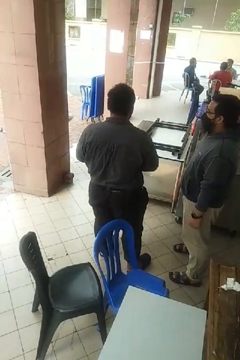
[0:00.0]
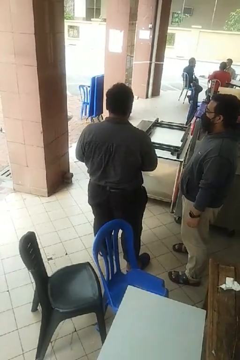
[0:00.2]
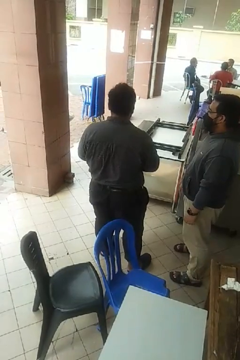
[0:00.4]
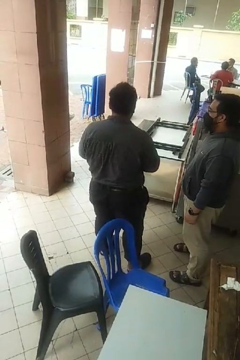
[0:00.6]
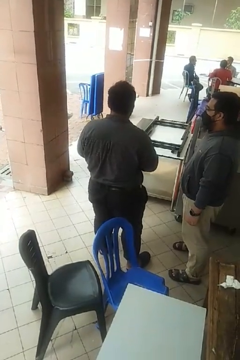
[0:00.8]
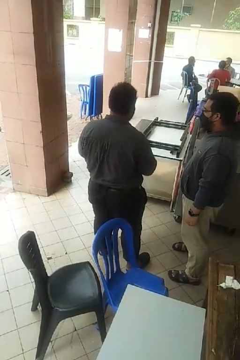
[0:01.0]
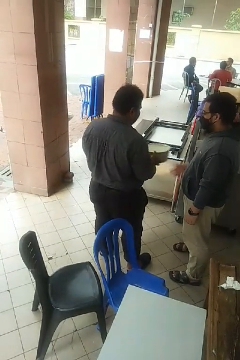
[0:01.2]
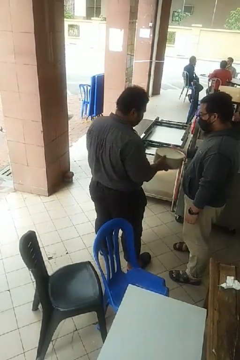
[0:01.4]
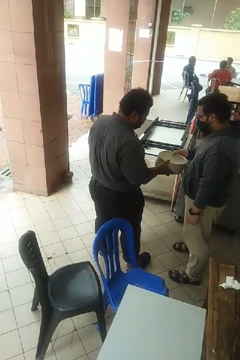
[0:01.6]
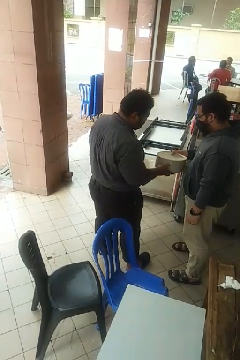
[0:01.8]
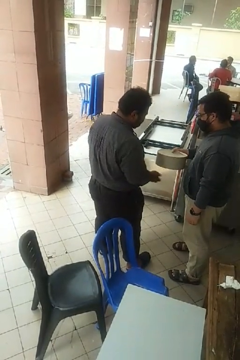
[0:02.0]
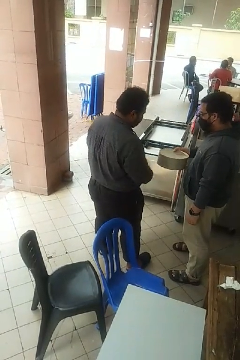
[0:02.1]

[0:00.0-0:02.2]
person transfers object to person

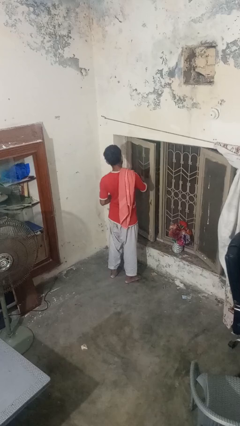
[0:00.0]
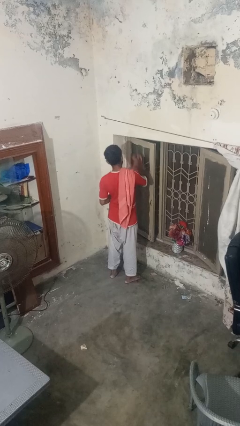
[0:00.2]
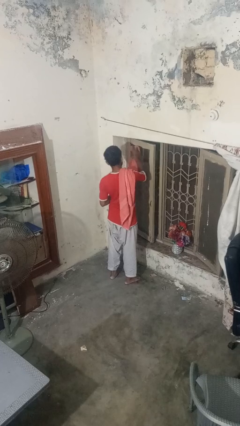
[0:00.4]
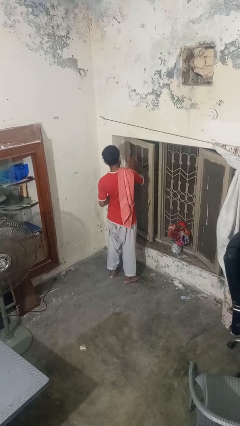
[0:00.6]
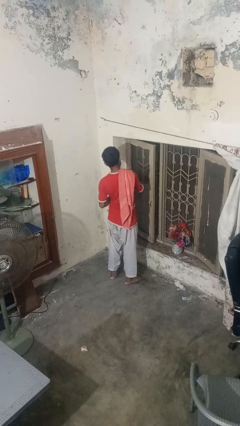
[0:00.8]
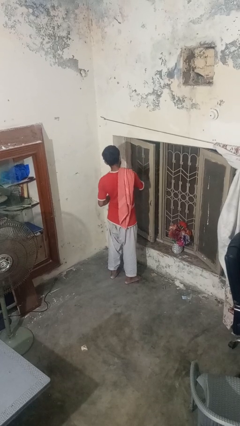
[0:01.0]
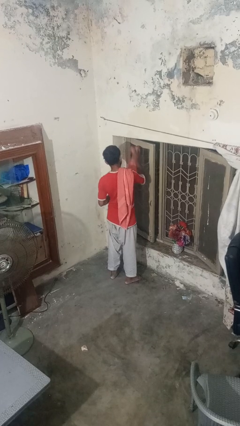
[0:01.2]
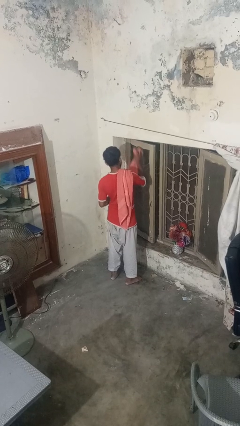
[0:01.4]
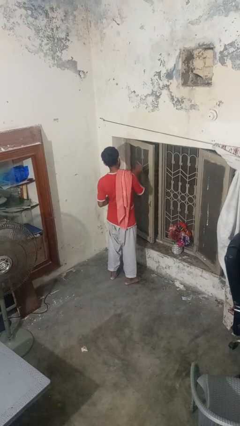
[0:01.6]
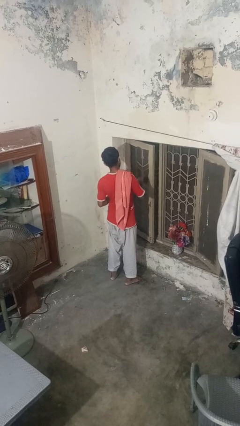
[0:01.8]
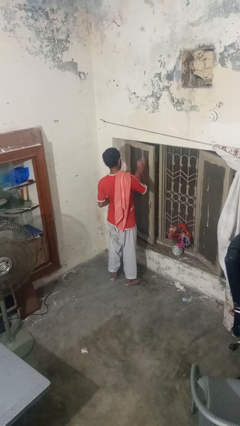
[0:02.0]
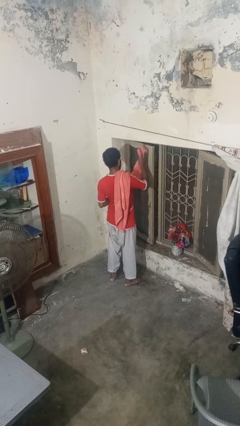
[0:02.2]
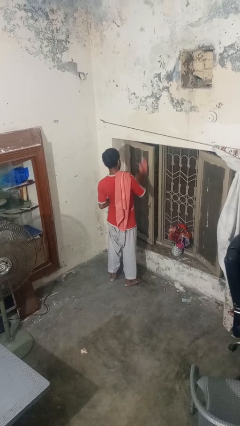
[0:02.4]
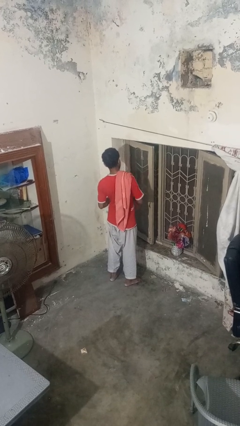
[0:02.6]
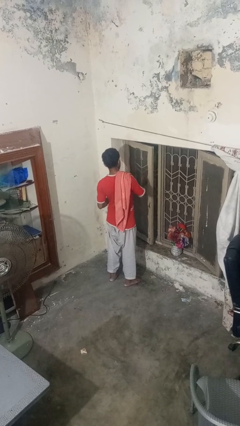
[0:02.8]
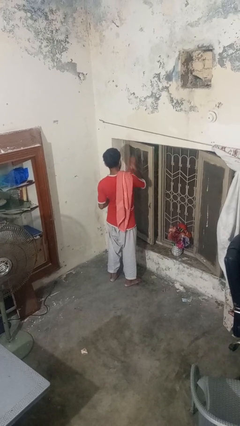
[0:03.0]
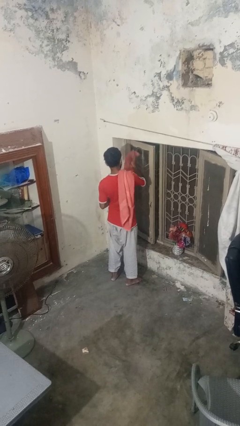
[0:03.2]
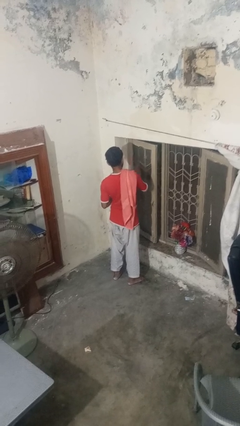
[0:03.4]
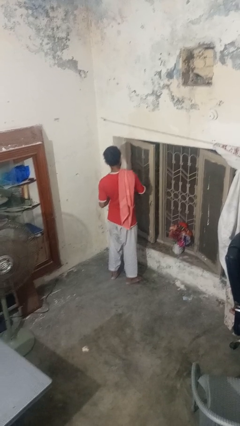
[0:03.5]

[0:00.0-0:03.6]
person washes window

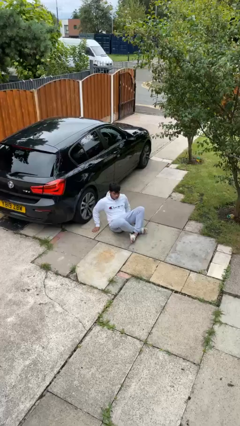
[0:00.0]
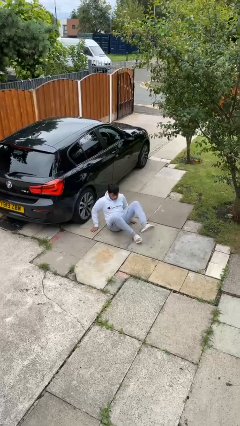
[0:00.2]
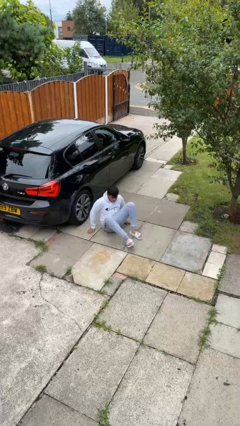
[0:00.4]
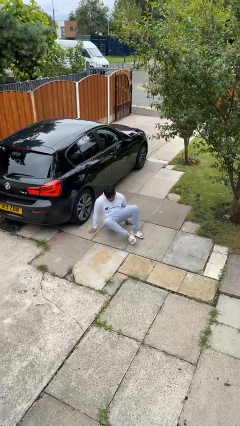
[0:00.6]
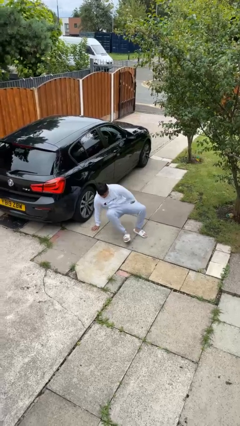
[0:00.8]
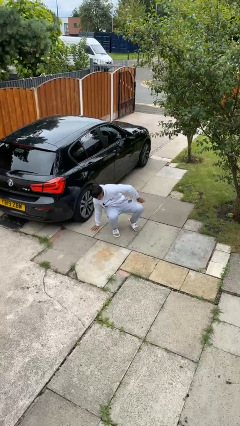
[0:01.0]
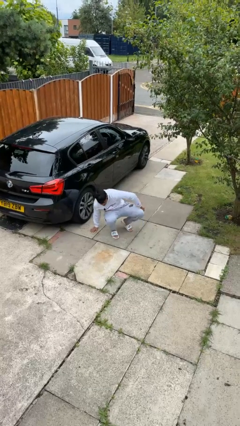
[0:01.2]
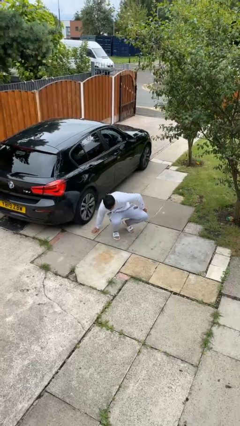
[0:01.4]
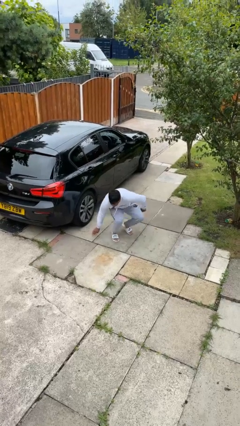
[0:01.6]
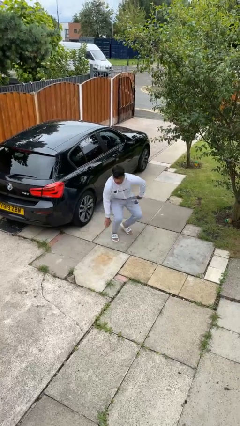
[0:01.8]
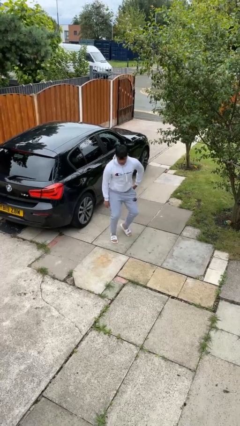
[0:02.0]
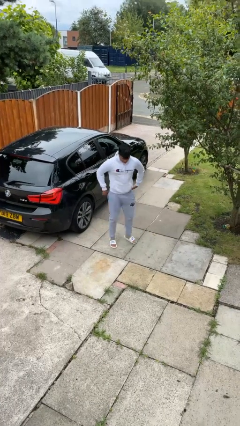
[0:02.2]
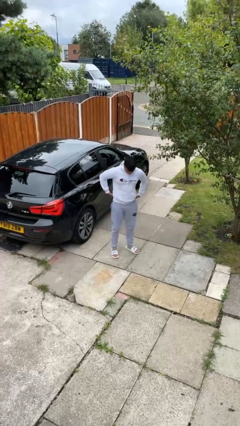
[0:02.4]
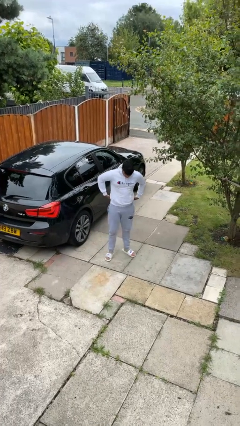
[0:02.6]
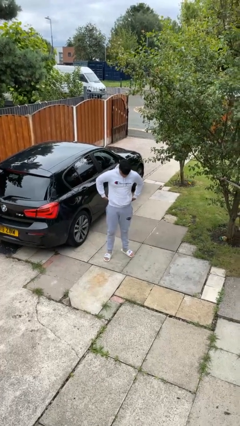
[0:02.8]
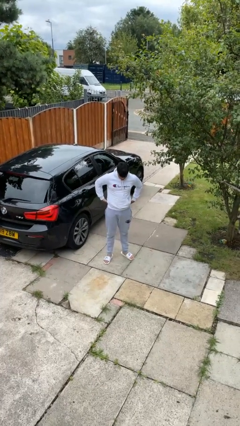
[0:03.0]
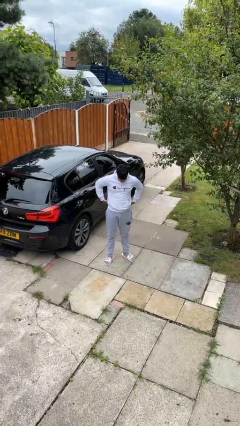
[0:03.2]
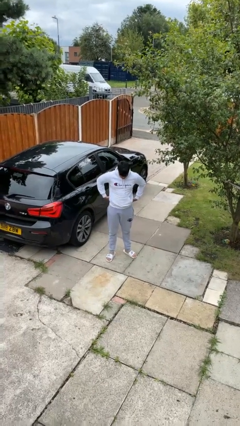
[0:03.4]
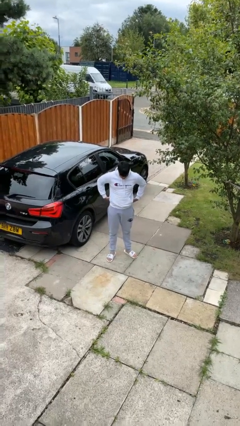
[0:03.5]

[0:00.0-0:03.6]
person stands up from floor

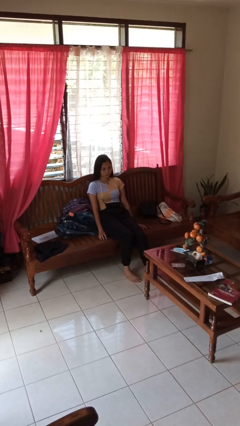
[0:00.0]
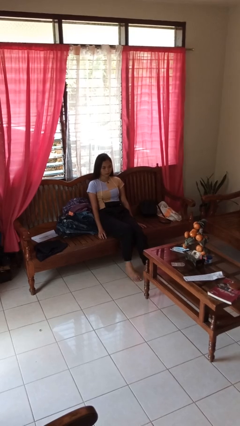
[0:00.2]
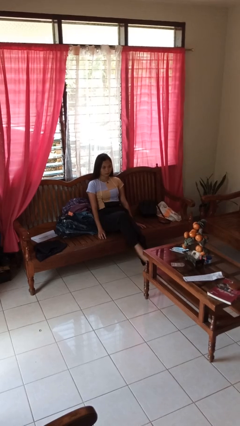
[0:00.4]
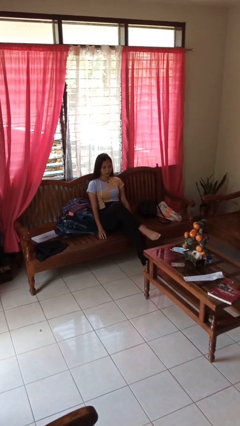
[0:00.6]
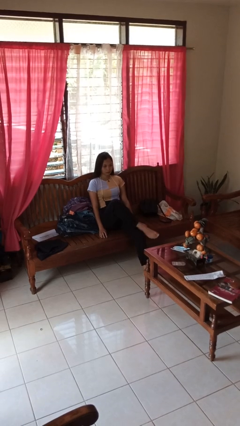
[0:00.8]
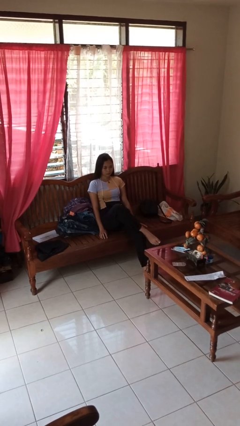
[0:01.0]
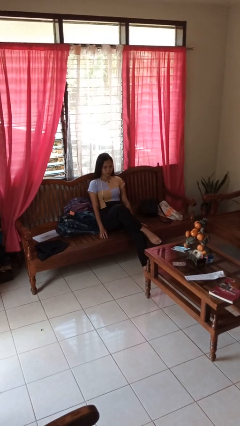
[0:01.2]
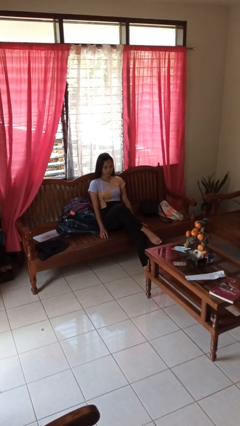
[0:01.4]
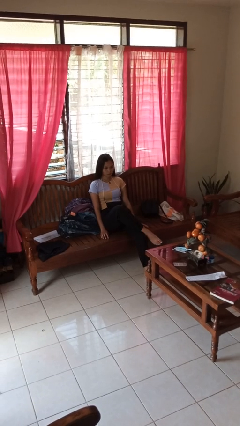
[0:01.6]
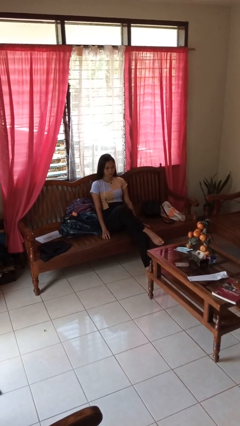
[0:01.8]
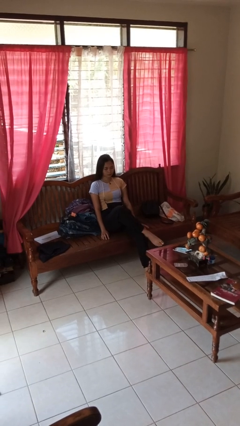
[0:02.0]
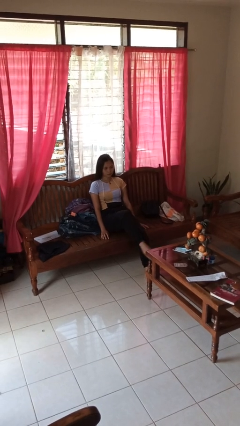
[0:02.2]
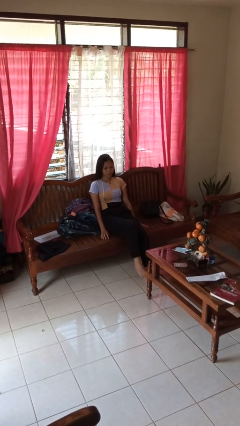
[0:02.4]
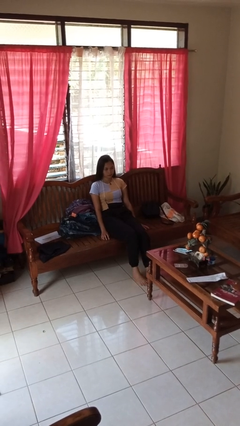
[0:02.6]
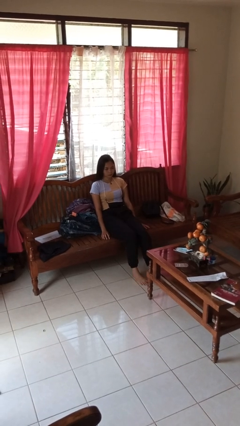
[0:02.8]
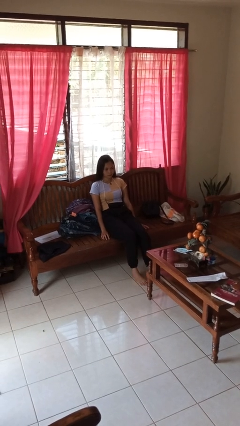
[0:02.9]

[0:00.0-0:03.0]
person crosses legs

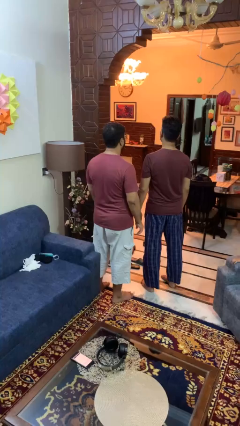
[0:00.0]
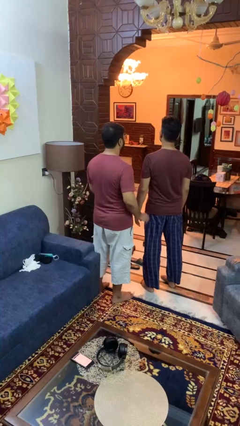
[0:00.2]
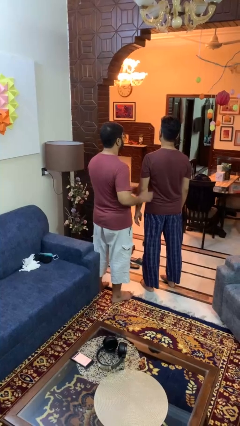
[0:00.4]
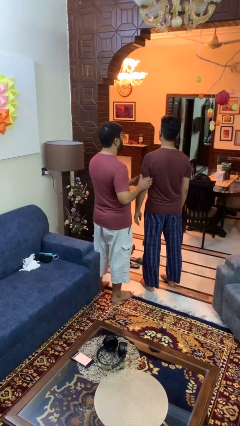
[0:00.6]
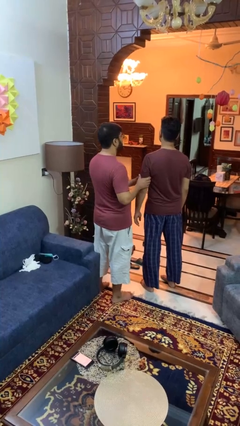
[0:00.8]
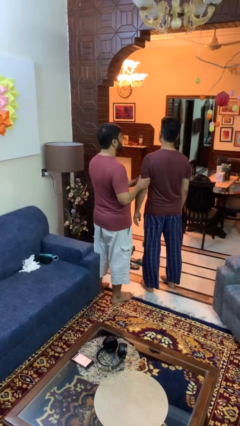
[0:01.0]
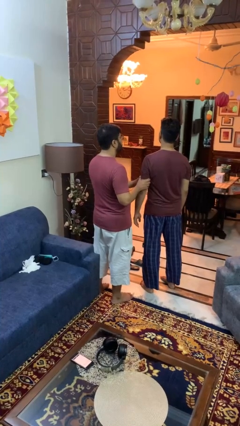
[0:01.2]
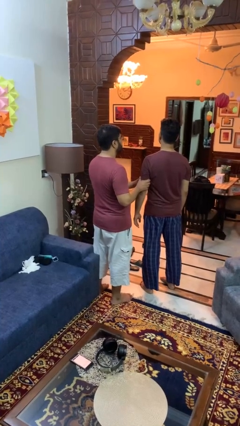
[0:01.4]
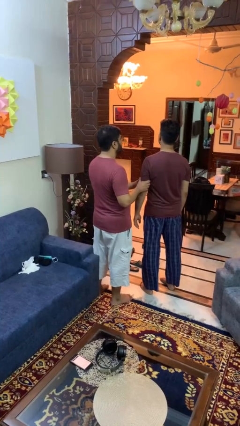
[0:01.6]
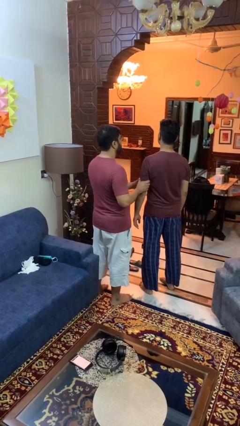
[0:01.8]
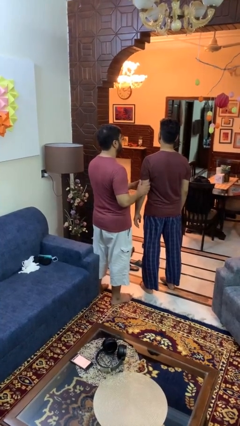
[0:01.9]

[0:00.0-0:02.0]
person grabs person by bicep

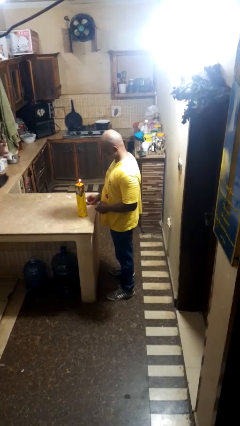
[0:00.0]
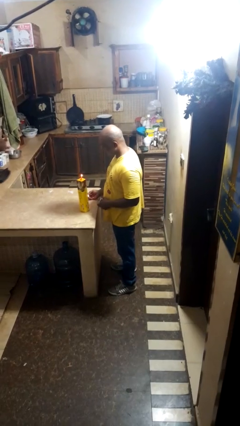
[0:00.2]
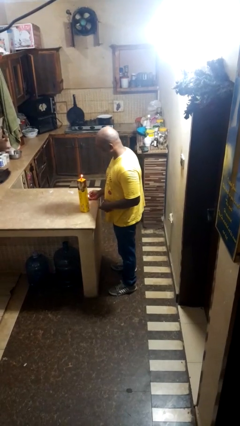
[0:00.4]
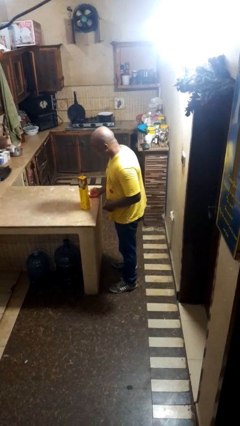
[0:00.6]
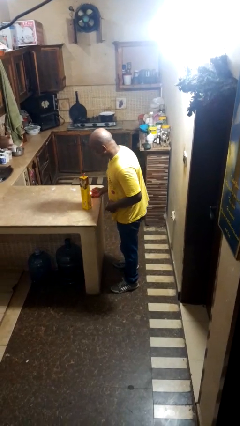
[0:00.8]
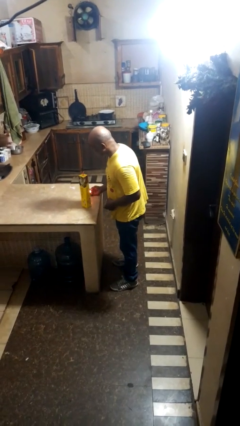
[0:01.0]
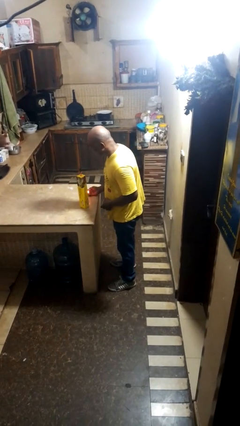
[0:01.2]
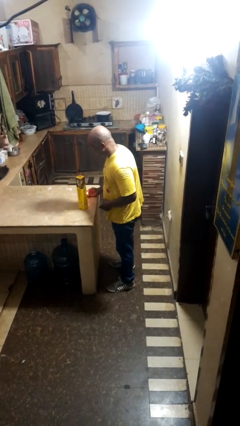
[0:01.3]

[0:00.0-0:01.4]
person extinguishes candle

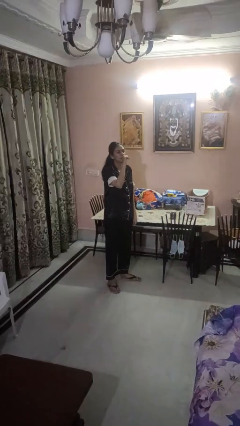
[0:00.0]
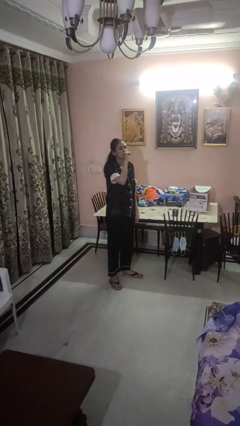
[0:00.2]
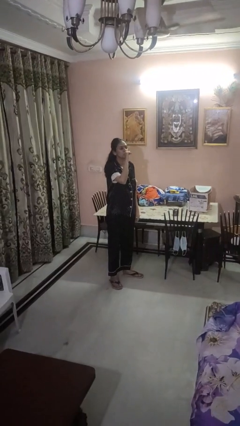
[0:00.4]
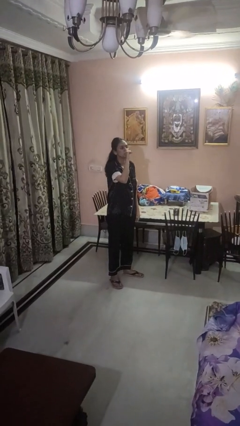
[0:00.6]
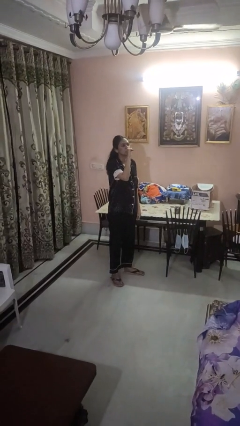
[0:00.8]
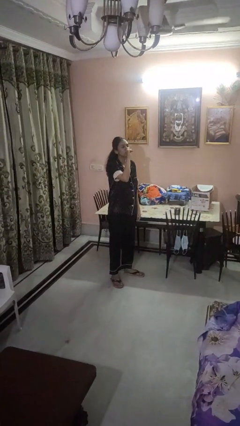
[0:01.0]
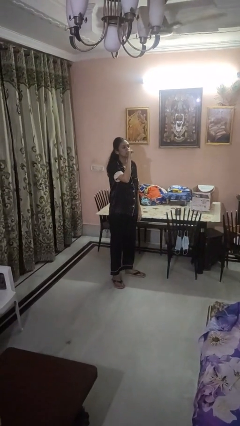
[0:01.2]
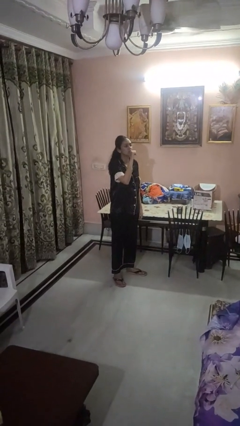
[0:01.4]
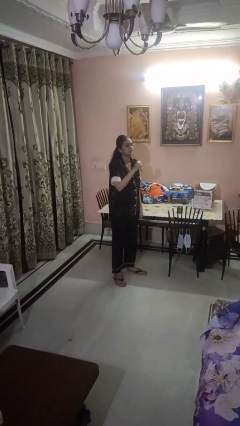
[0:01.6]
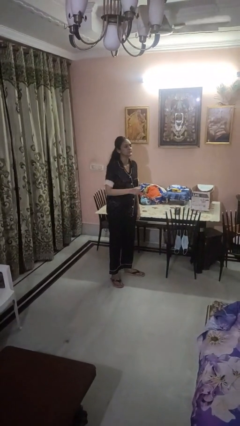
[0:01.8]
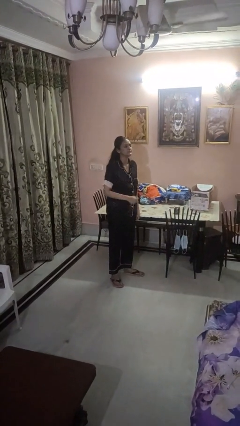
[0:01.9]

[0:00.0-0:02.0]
person vapes

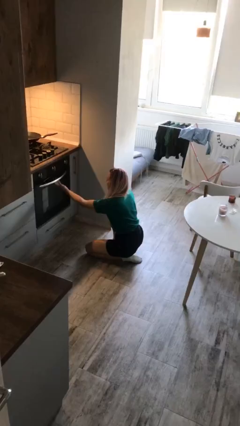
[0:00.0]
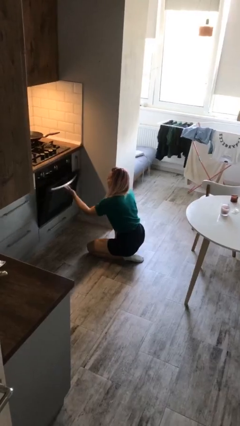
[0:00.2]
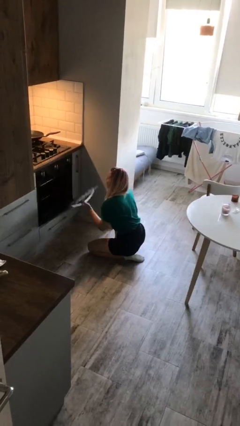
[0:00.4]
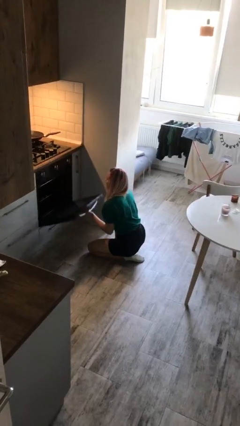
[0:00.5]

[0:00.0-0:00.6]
person opens oven door
